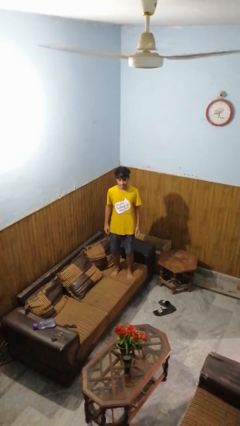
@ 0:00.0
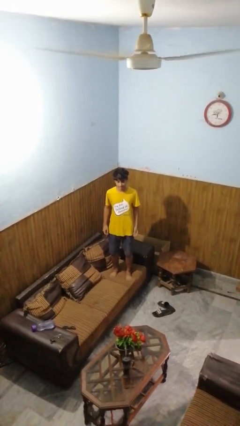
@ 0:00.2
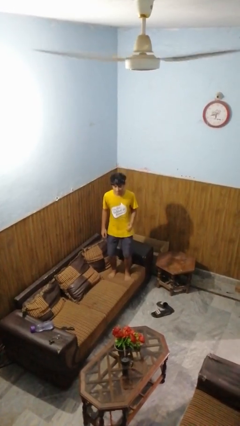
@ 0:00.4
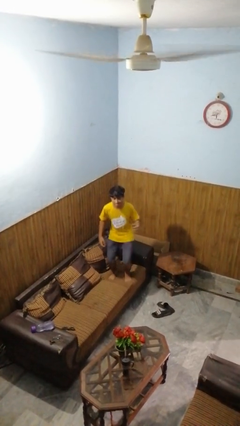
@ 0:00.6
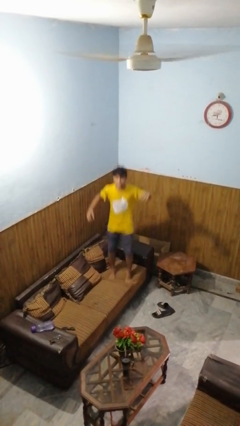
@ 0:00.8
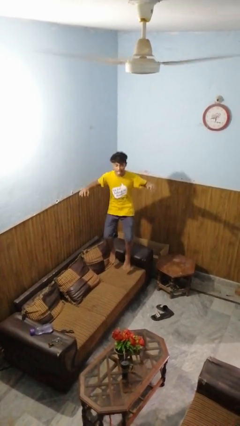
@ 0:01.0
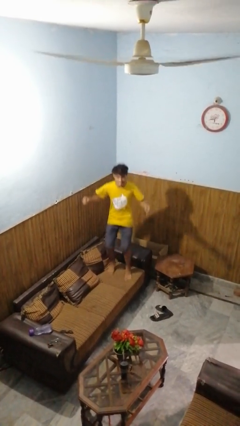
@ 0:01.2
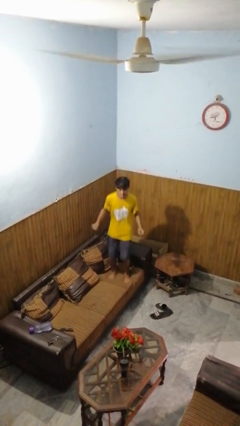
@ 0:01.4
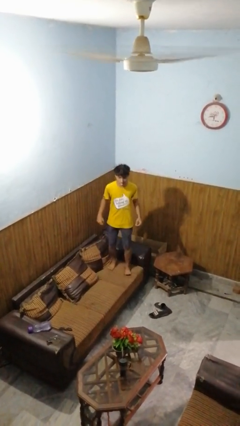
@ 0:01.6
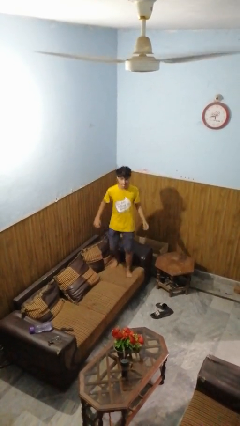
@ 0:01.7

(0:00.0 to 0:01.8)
person jumps on couch

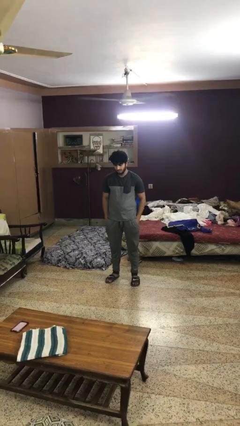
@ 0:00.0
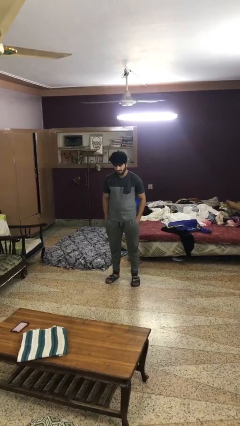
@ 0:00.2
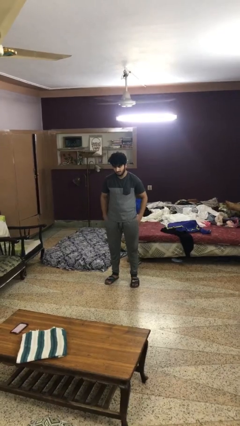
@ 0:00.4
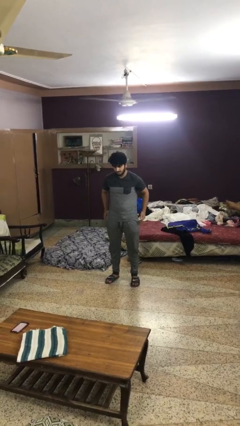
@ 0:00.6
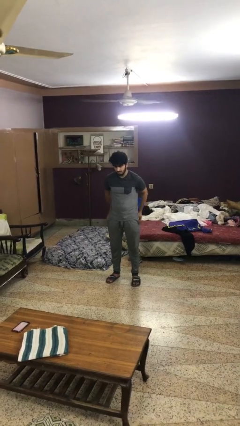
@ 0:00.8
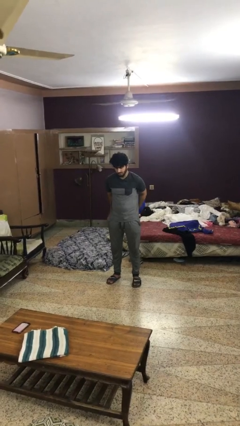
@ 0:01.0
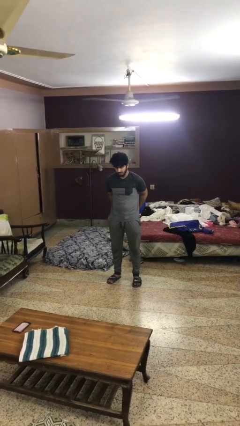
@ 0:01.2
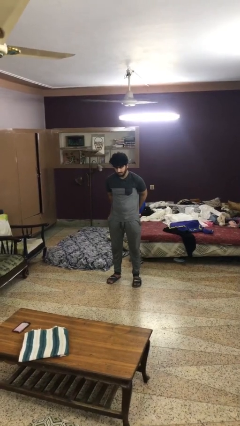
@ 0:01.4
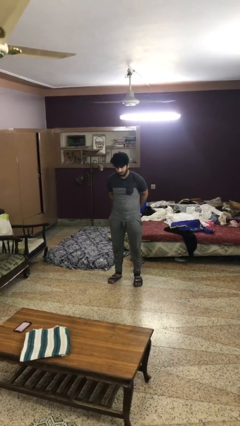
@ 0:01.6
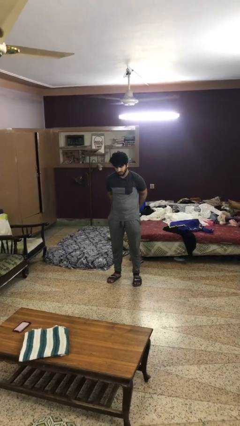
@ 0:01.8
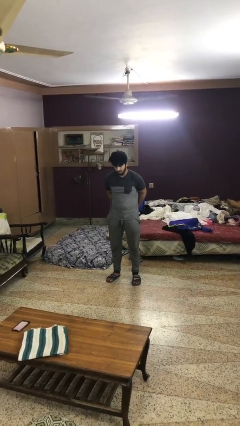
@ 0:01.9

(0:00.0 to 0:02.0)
person puts hands in back pockets

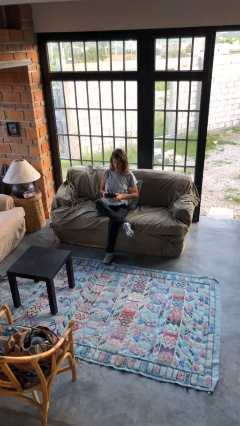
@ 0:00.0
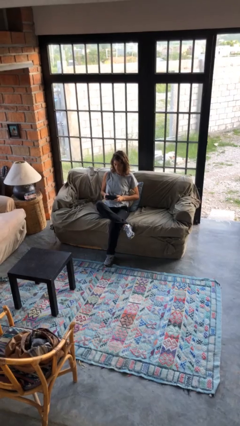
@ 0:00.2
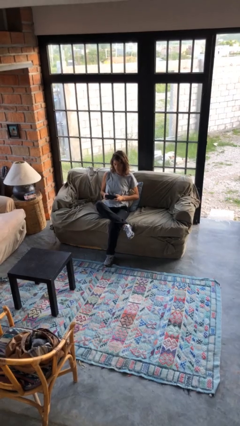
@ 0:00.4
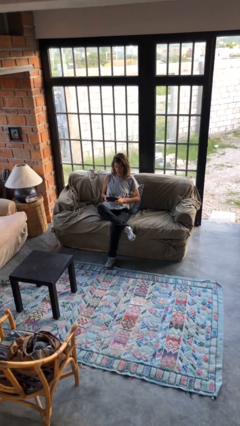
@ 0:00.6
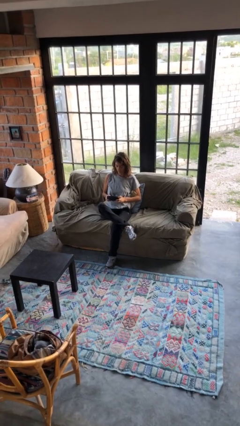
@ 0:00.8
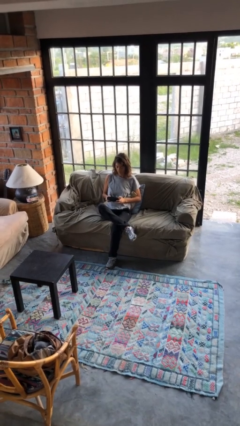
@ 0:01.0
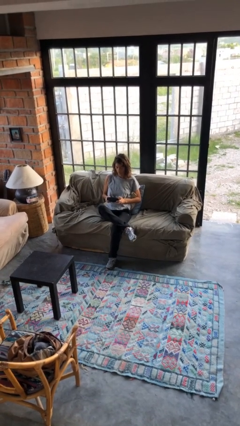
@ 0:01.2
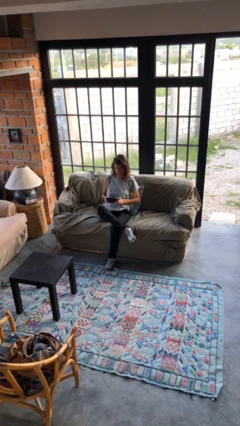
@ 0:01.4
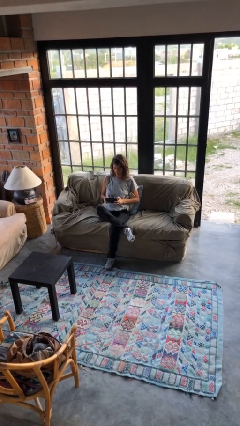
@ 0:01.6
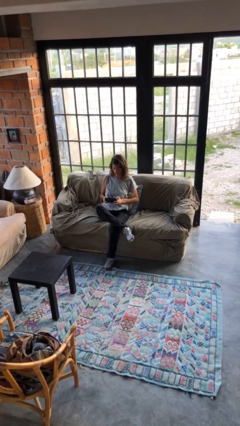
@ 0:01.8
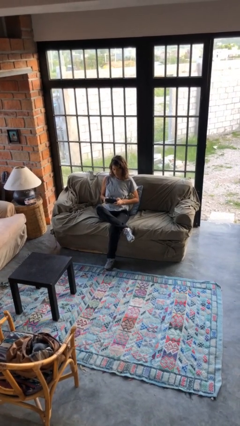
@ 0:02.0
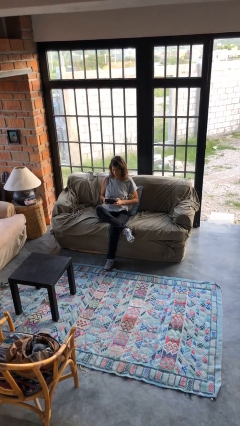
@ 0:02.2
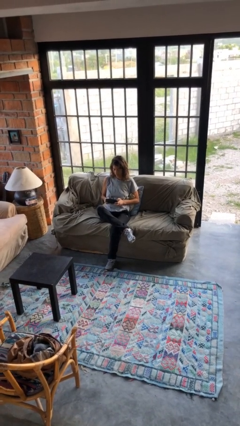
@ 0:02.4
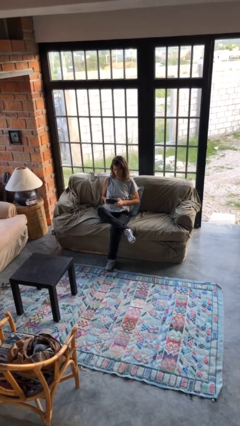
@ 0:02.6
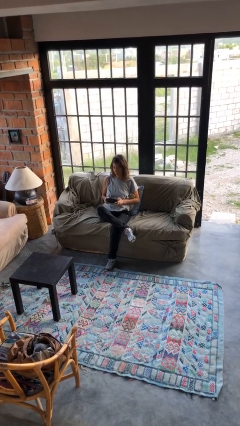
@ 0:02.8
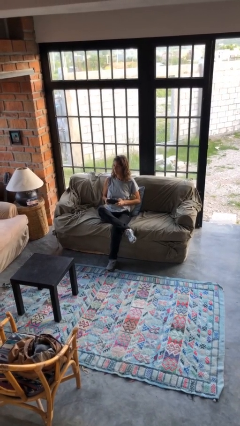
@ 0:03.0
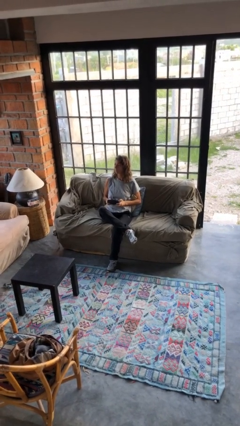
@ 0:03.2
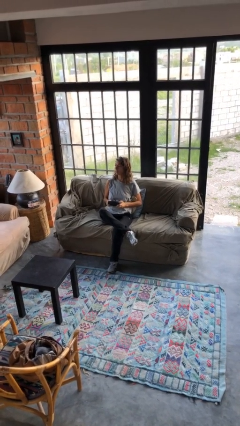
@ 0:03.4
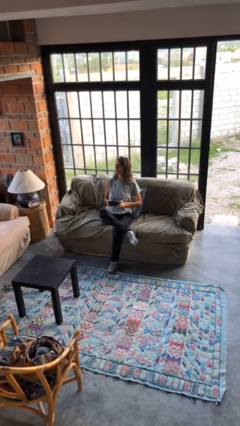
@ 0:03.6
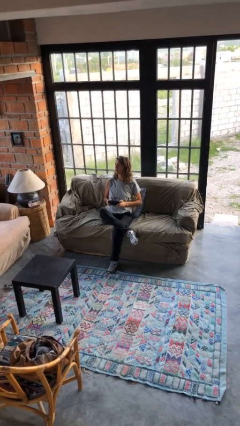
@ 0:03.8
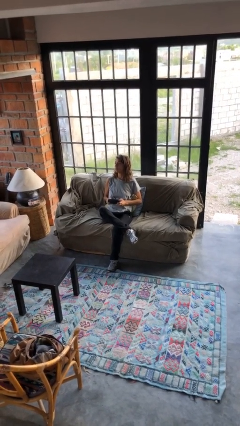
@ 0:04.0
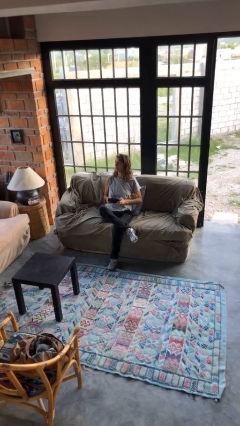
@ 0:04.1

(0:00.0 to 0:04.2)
person interacts with handheld game

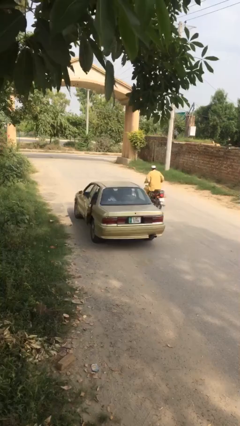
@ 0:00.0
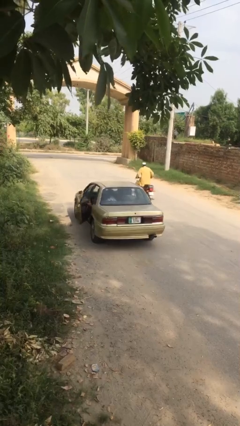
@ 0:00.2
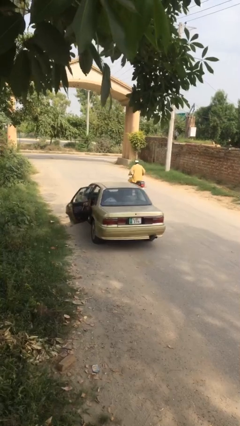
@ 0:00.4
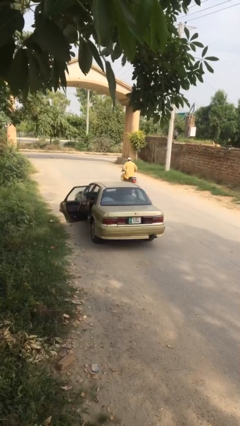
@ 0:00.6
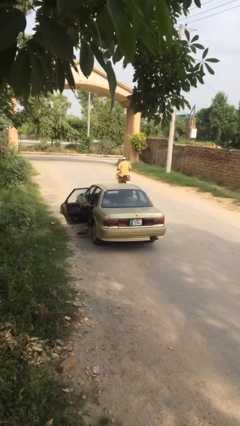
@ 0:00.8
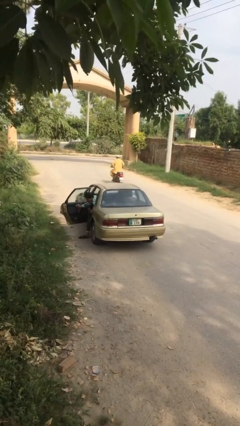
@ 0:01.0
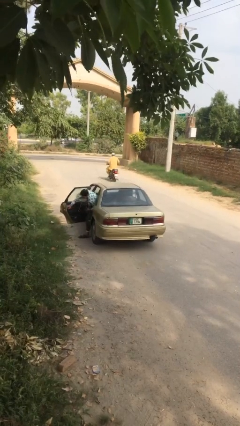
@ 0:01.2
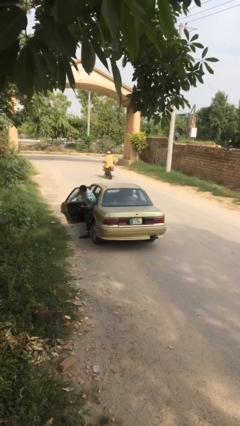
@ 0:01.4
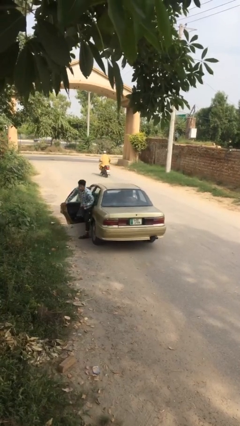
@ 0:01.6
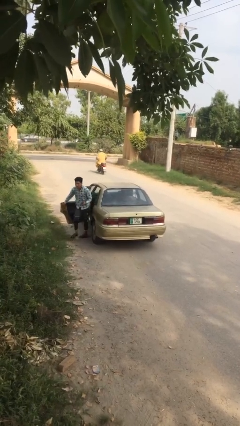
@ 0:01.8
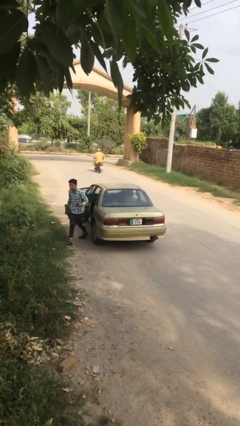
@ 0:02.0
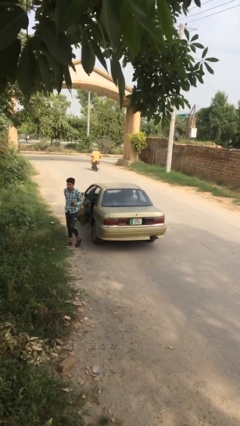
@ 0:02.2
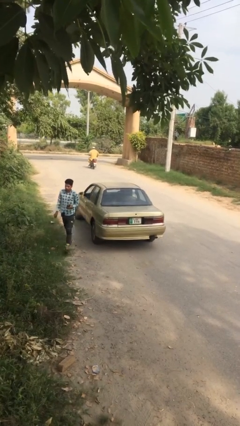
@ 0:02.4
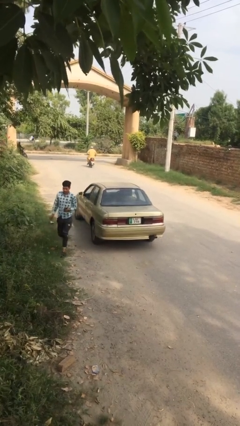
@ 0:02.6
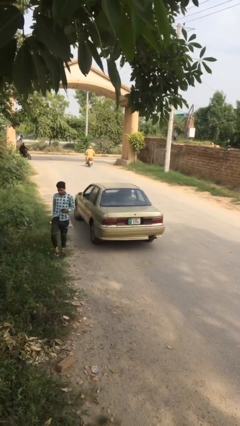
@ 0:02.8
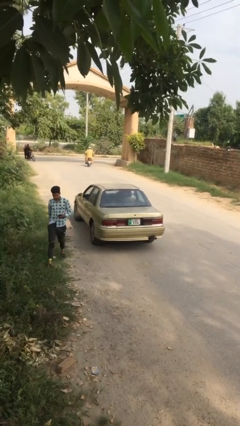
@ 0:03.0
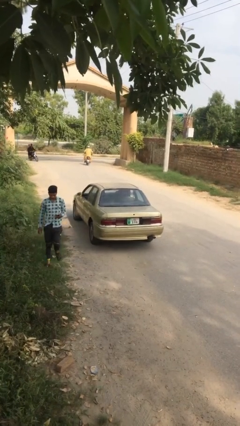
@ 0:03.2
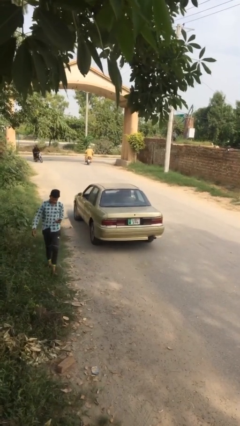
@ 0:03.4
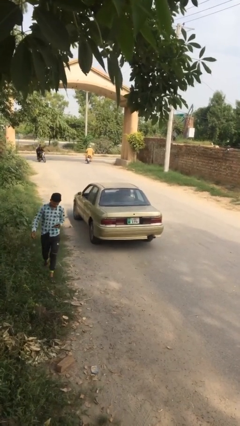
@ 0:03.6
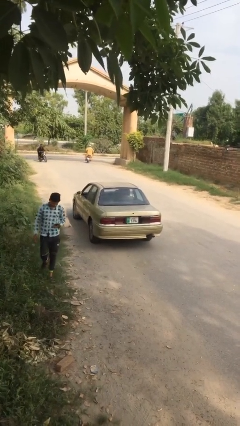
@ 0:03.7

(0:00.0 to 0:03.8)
car drops off person

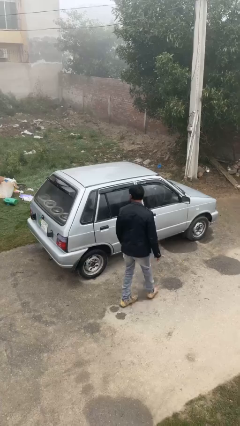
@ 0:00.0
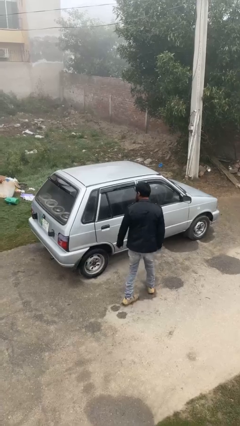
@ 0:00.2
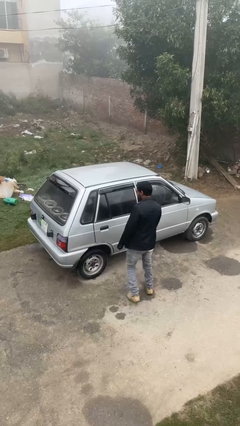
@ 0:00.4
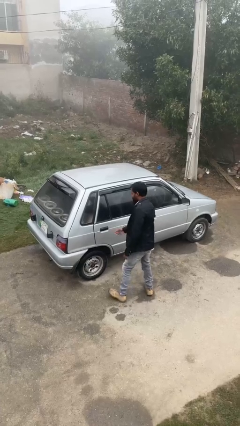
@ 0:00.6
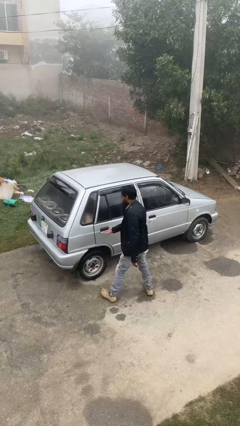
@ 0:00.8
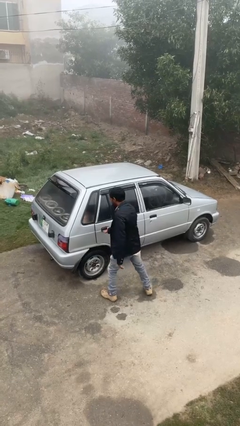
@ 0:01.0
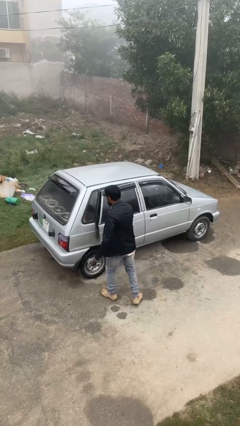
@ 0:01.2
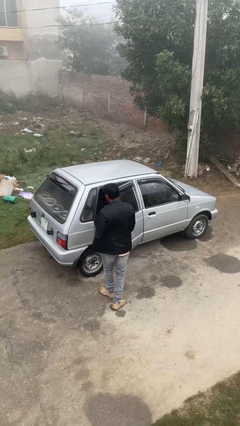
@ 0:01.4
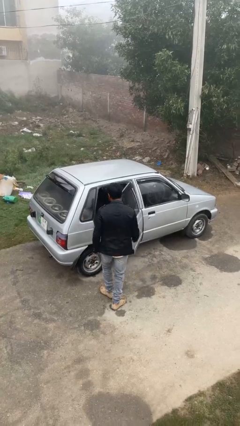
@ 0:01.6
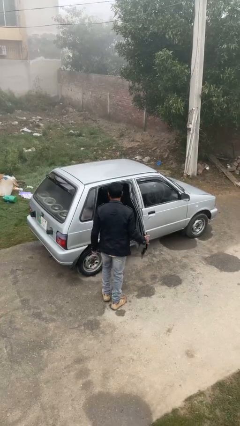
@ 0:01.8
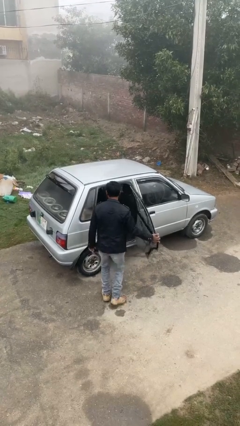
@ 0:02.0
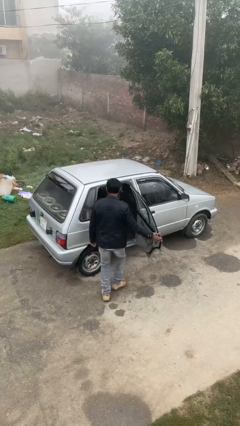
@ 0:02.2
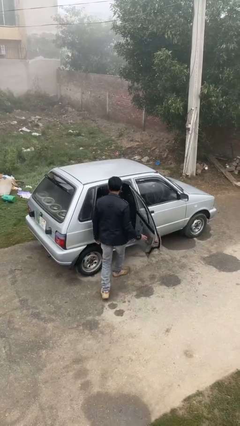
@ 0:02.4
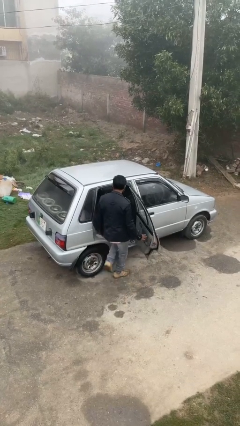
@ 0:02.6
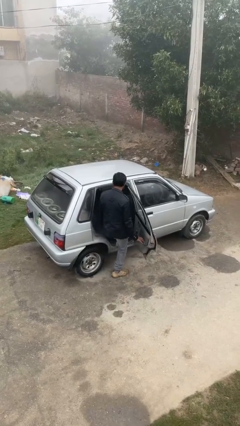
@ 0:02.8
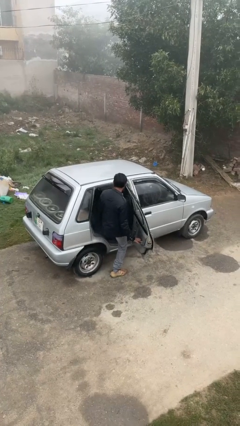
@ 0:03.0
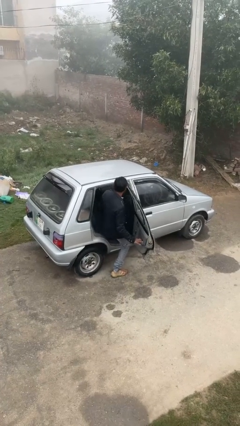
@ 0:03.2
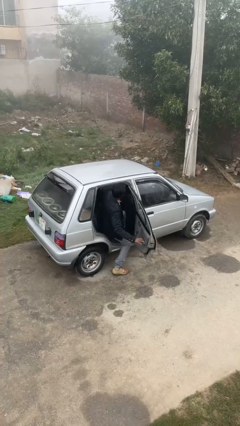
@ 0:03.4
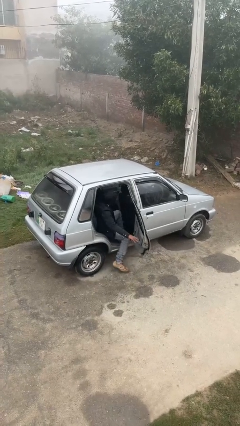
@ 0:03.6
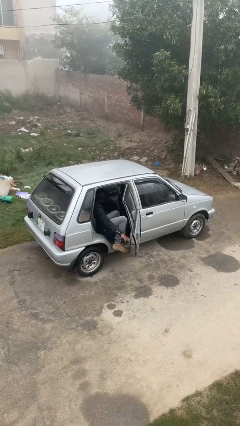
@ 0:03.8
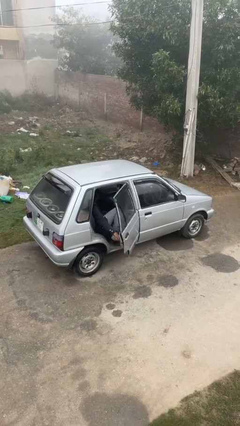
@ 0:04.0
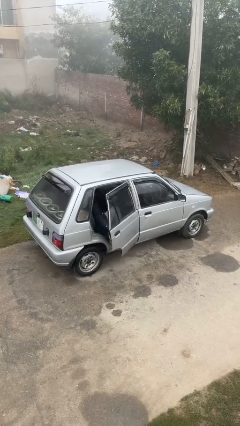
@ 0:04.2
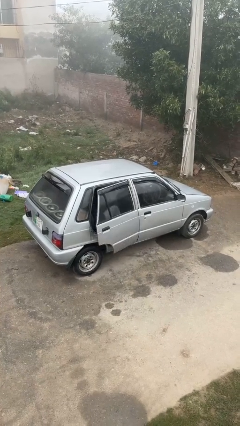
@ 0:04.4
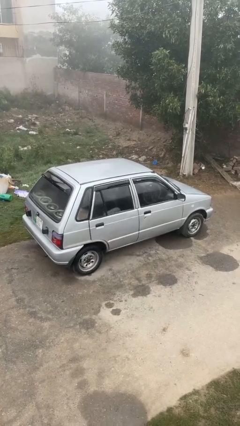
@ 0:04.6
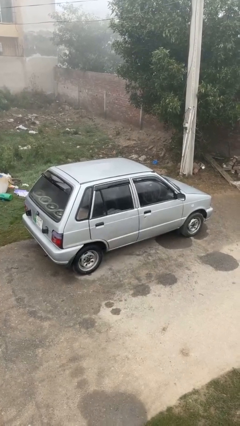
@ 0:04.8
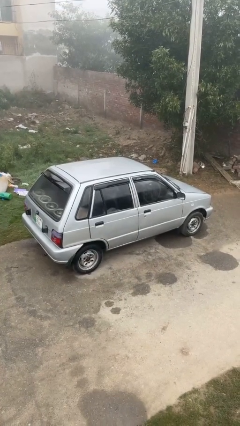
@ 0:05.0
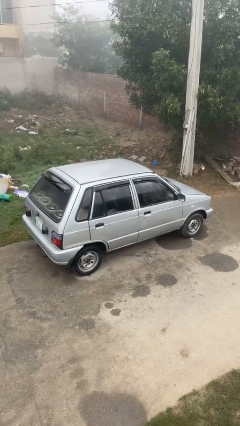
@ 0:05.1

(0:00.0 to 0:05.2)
car picks up person

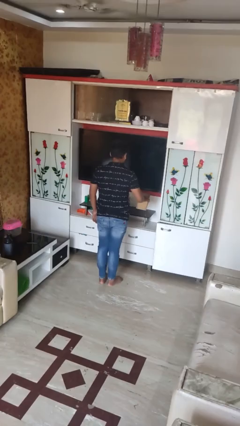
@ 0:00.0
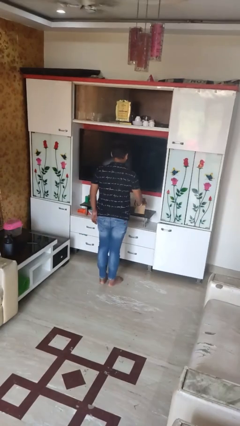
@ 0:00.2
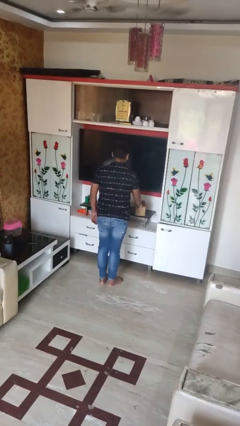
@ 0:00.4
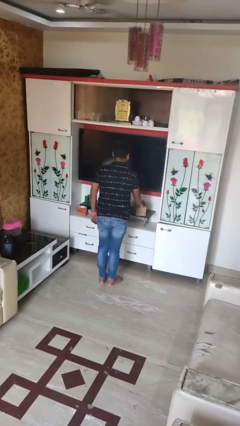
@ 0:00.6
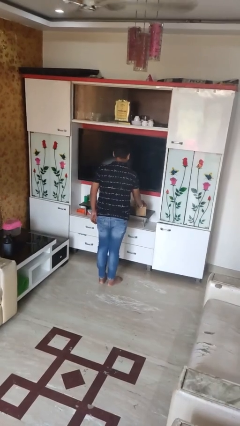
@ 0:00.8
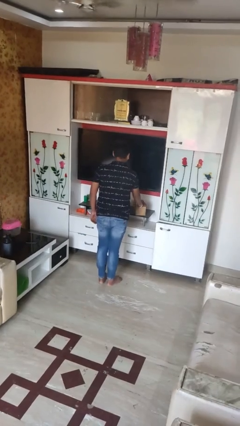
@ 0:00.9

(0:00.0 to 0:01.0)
person puts down object on countertop
